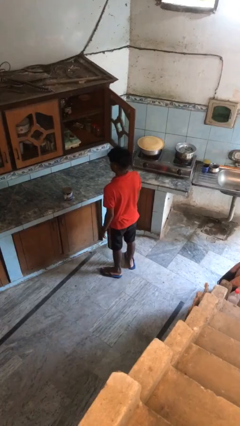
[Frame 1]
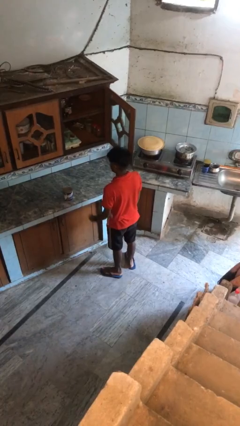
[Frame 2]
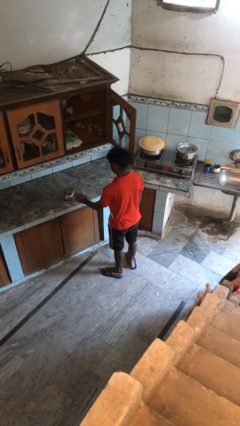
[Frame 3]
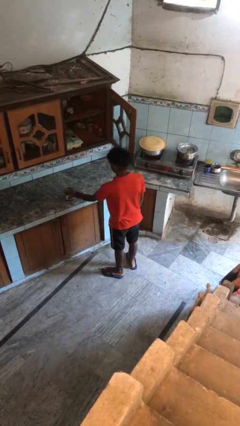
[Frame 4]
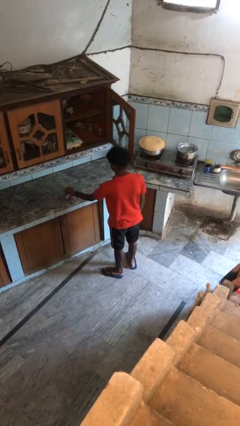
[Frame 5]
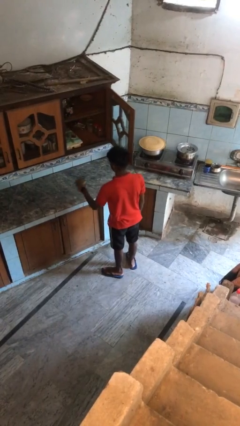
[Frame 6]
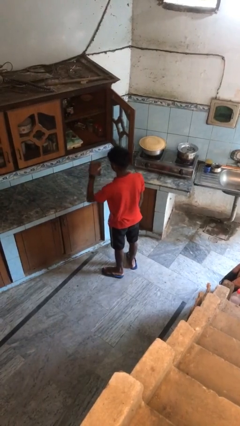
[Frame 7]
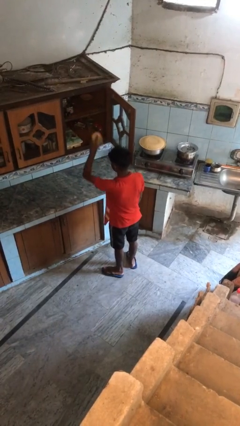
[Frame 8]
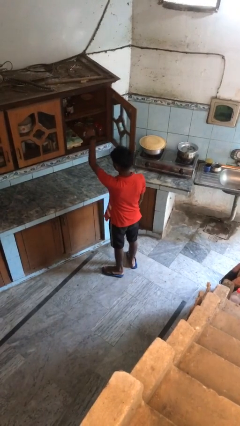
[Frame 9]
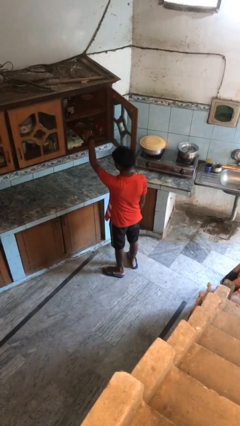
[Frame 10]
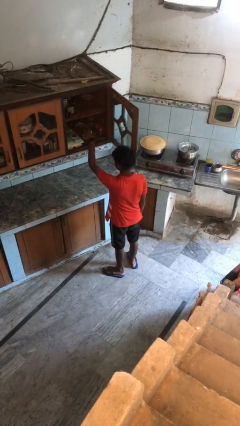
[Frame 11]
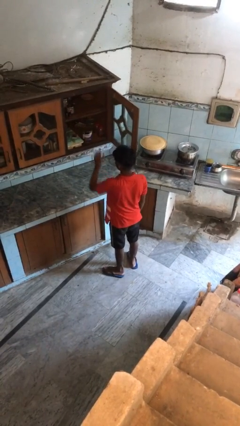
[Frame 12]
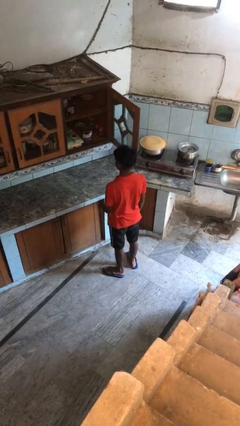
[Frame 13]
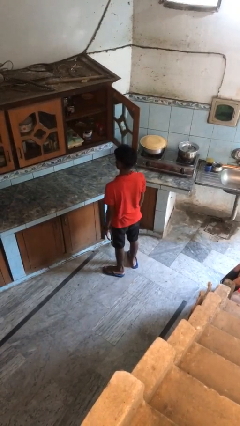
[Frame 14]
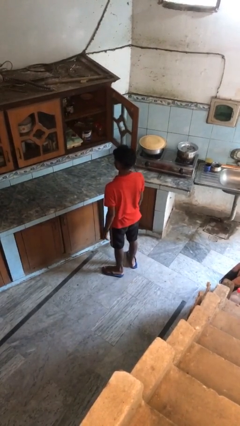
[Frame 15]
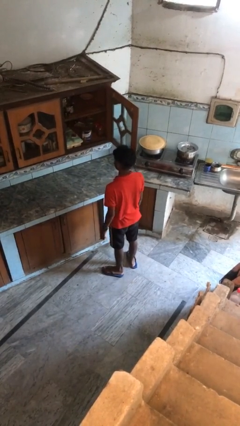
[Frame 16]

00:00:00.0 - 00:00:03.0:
person puts object in cabinet

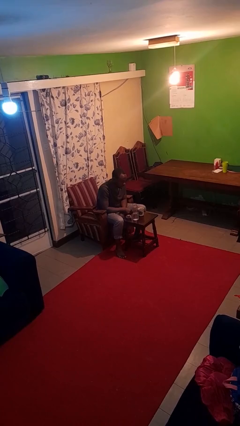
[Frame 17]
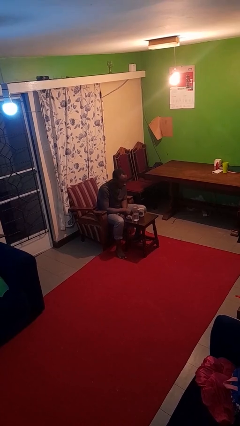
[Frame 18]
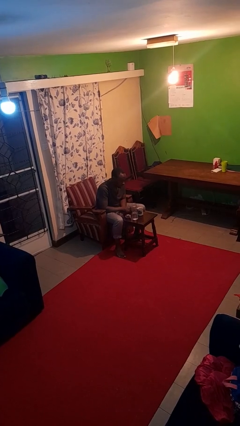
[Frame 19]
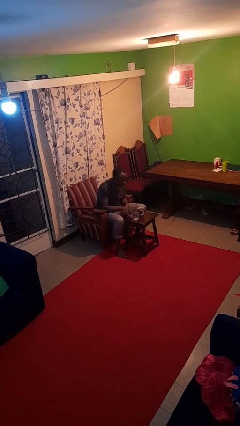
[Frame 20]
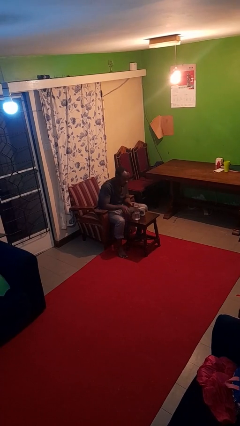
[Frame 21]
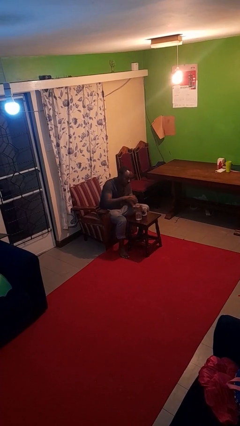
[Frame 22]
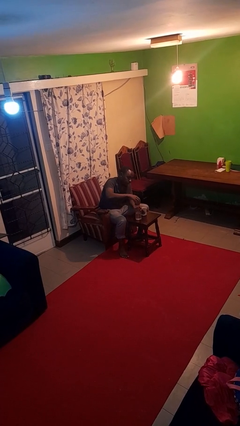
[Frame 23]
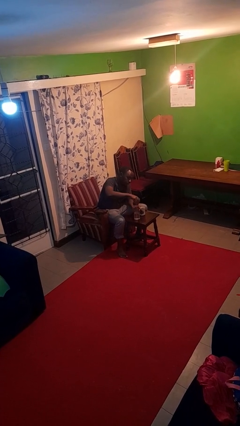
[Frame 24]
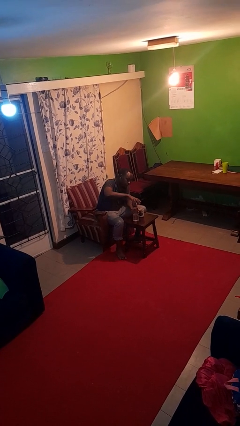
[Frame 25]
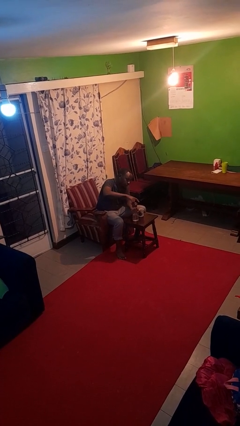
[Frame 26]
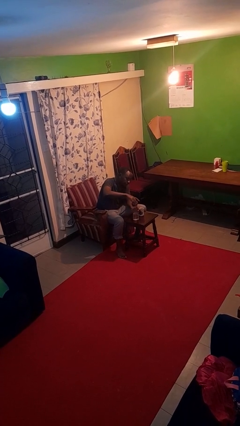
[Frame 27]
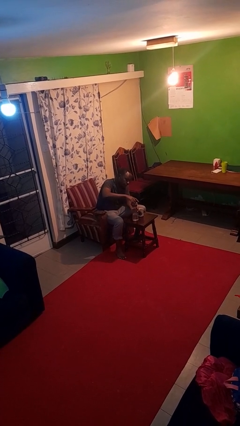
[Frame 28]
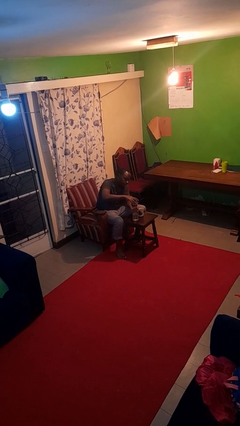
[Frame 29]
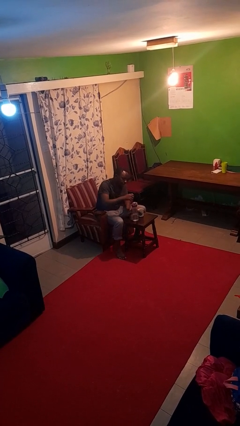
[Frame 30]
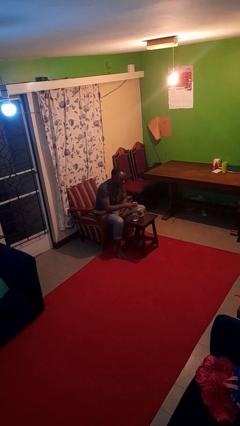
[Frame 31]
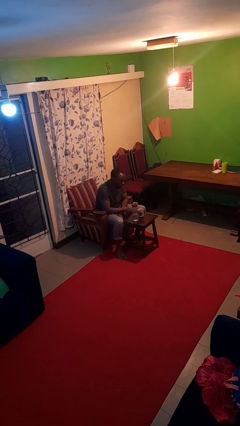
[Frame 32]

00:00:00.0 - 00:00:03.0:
person screws lid to bottle

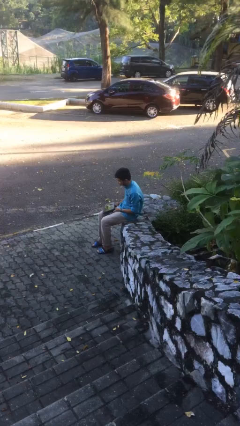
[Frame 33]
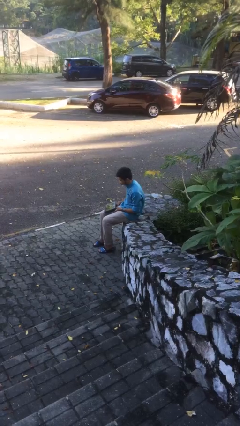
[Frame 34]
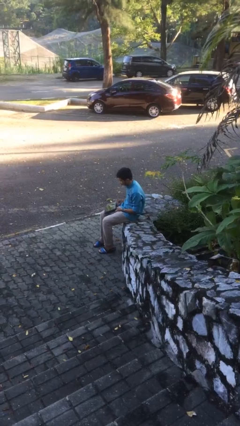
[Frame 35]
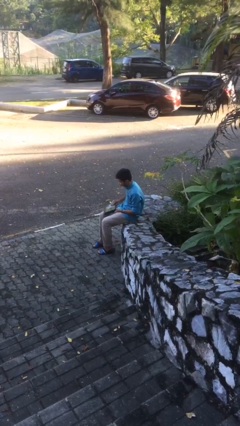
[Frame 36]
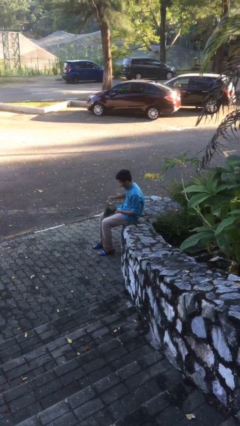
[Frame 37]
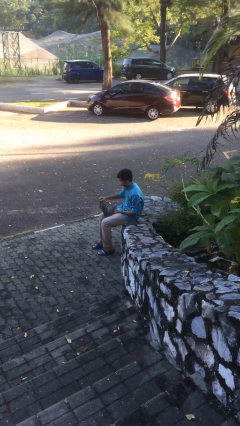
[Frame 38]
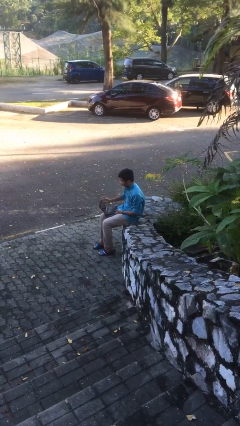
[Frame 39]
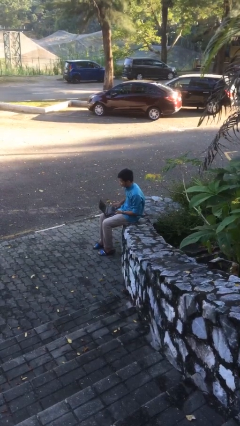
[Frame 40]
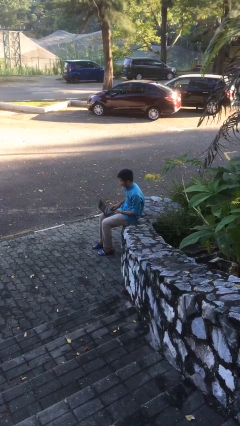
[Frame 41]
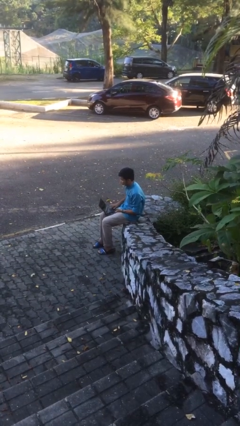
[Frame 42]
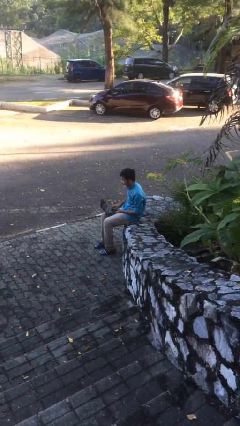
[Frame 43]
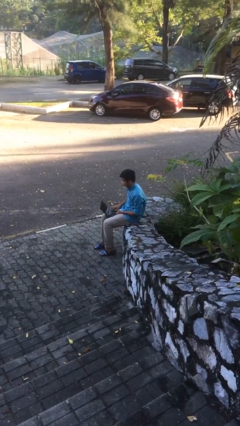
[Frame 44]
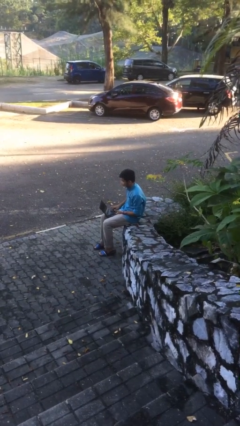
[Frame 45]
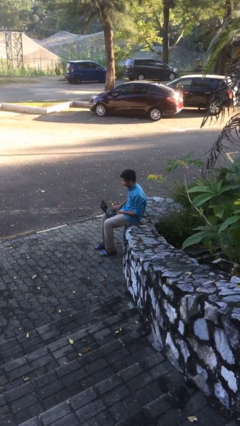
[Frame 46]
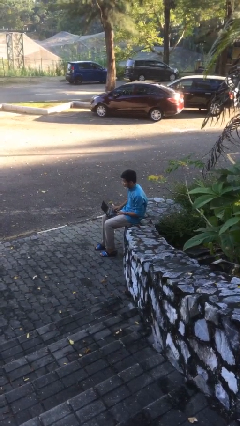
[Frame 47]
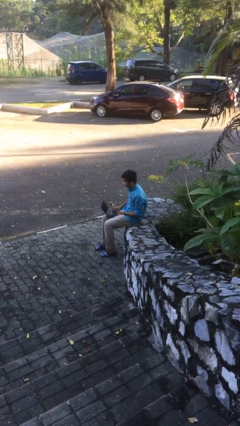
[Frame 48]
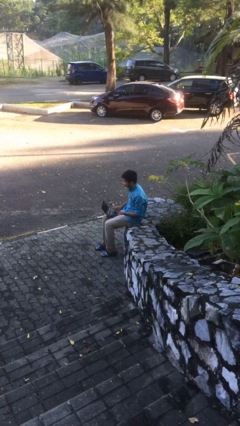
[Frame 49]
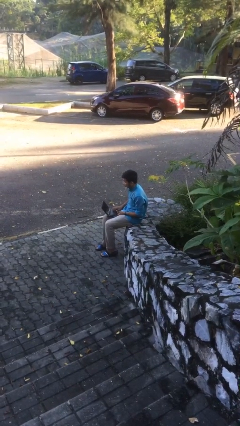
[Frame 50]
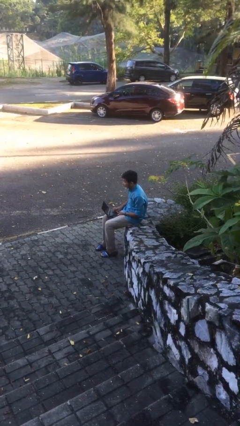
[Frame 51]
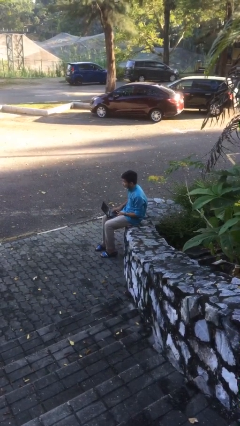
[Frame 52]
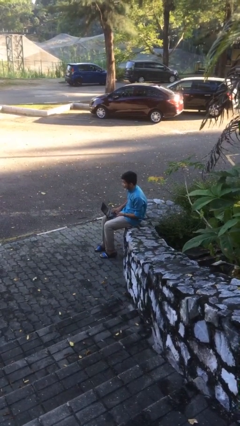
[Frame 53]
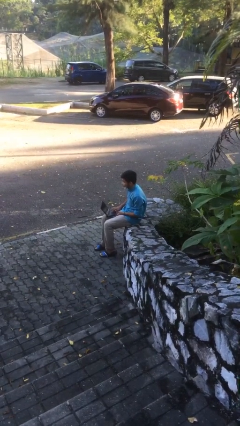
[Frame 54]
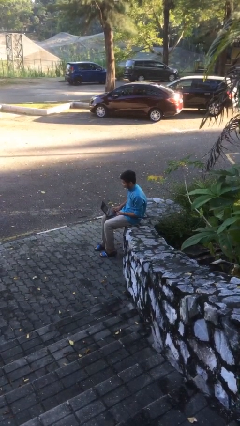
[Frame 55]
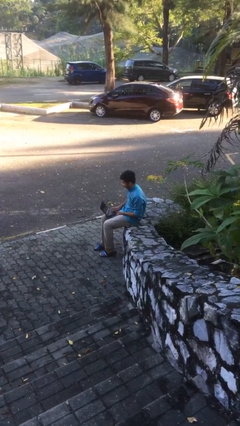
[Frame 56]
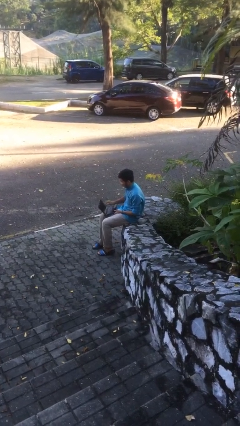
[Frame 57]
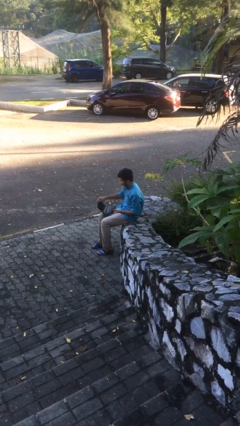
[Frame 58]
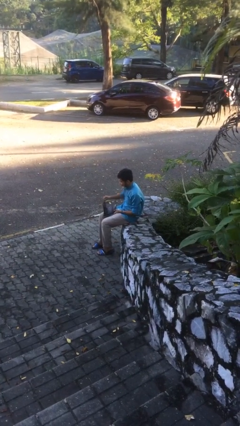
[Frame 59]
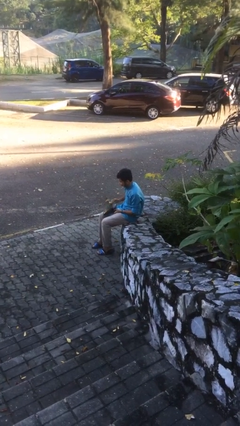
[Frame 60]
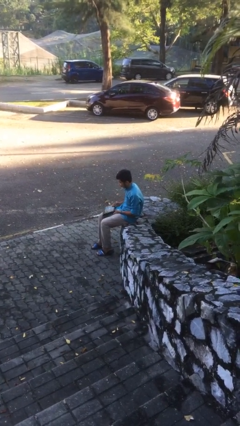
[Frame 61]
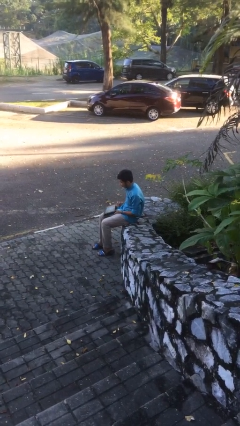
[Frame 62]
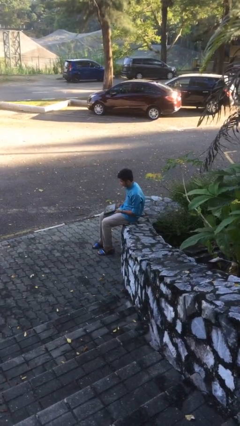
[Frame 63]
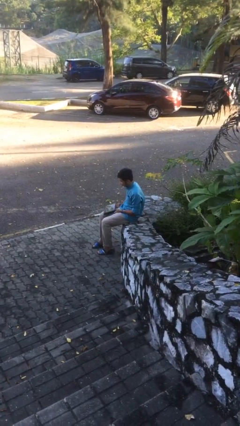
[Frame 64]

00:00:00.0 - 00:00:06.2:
person interacts with laptop

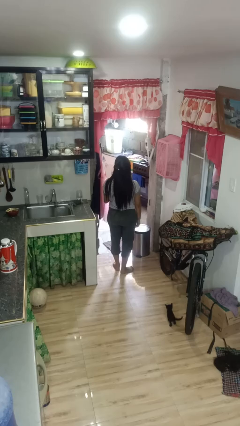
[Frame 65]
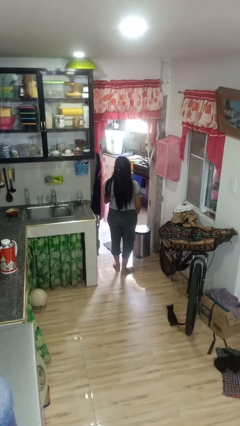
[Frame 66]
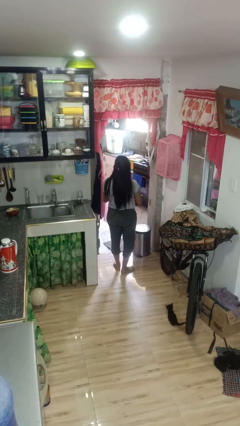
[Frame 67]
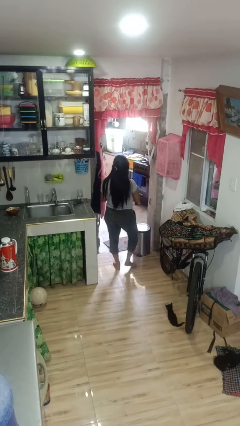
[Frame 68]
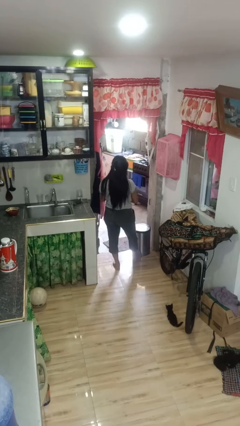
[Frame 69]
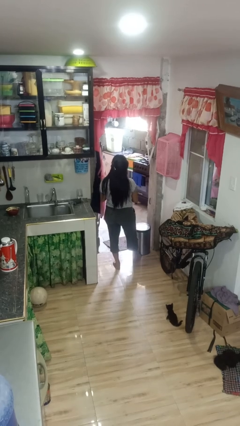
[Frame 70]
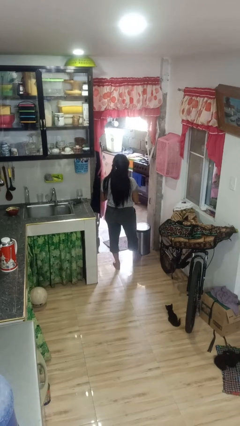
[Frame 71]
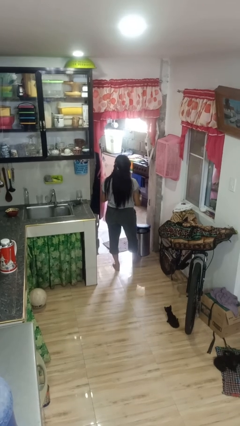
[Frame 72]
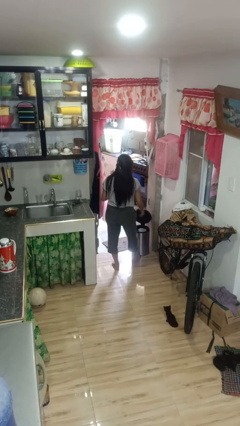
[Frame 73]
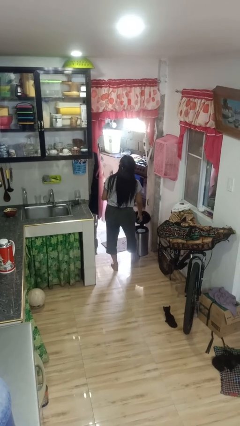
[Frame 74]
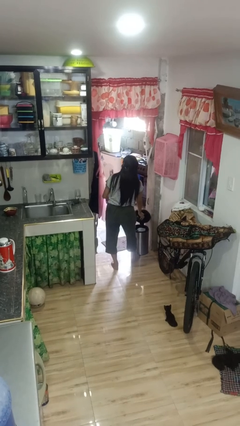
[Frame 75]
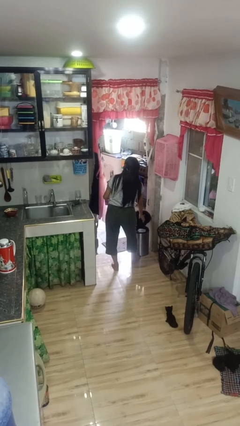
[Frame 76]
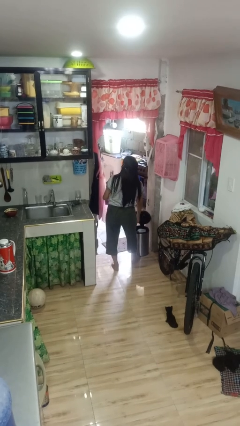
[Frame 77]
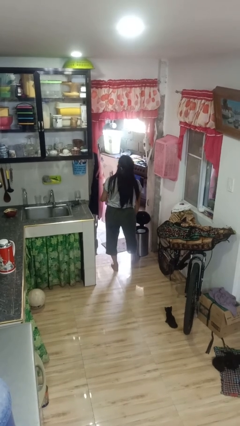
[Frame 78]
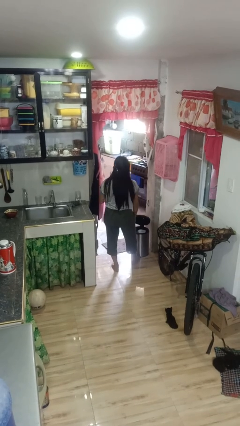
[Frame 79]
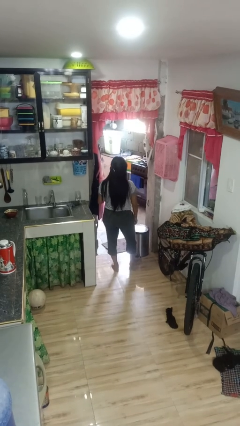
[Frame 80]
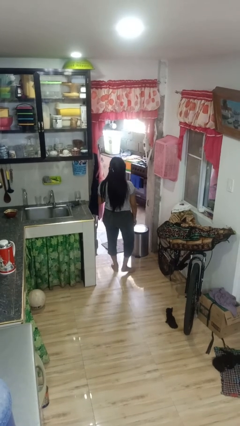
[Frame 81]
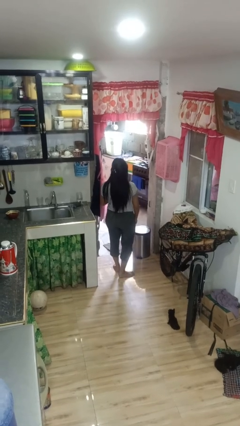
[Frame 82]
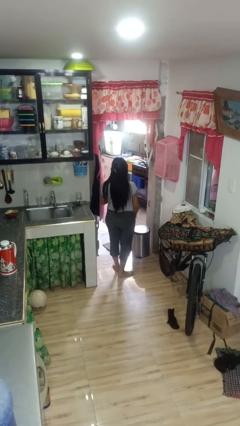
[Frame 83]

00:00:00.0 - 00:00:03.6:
person discards trash

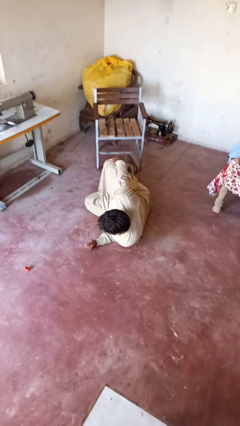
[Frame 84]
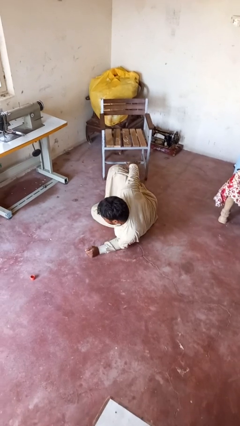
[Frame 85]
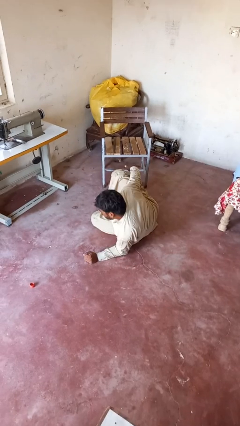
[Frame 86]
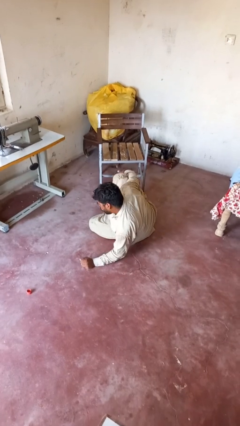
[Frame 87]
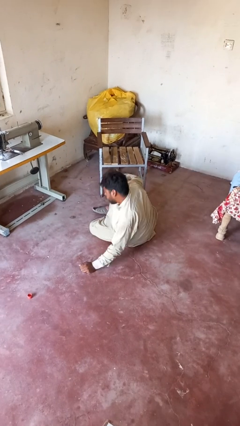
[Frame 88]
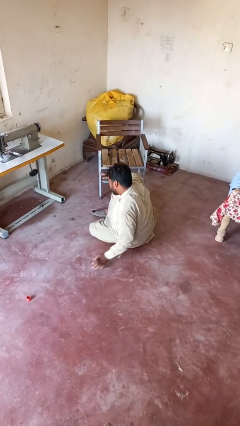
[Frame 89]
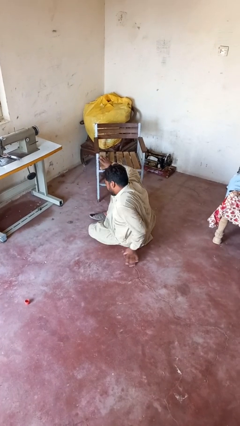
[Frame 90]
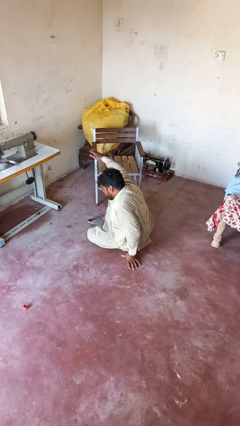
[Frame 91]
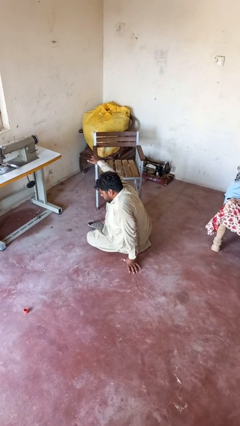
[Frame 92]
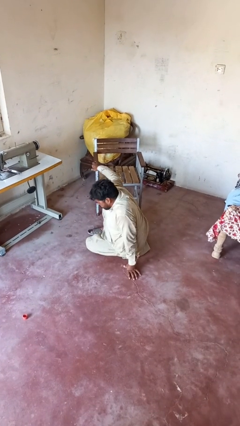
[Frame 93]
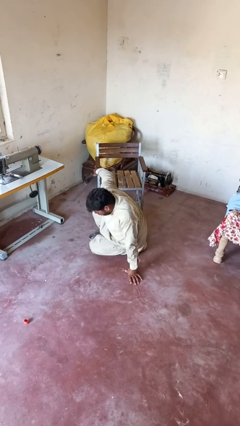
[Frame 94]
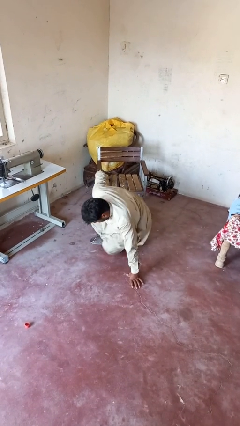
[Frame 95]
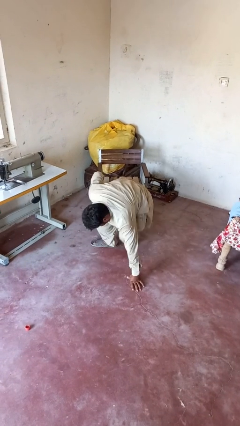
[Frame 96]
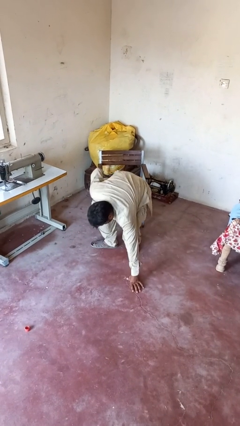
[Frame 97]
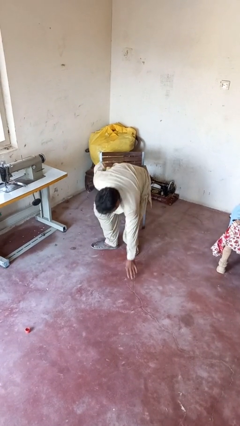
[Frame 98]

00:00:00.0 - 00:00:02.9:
person stands up from floor
